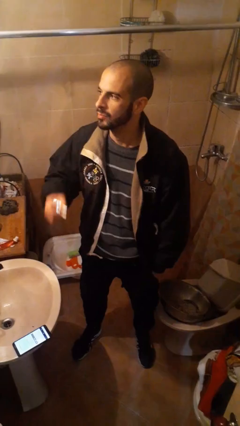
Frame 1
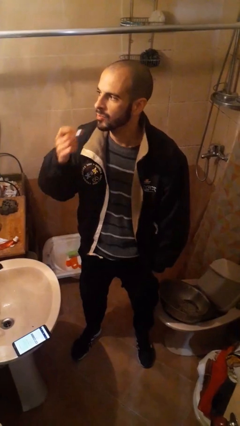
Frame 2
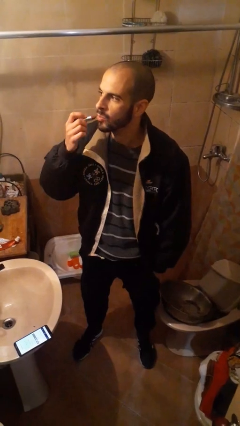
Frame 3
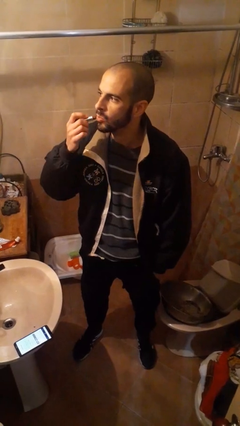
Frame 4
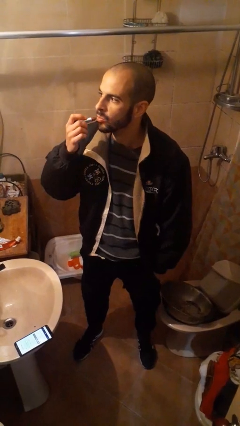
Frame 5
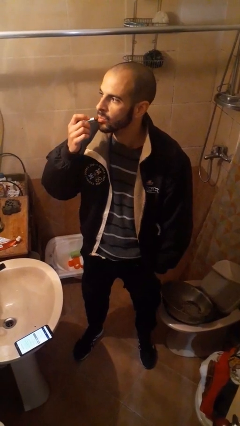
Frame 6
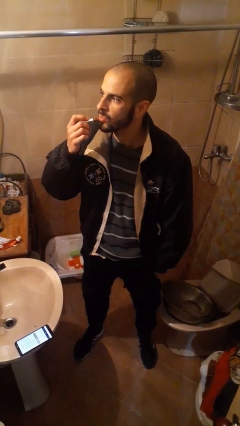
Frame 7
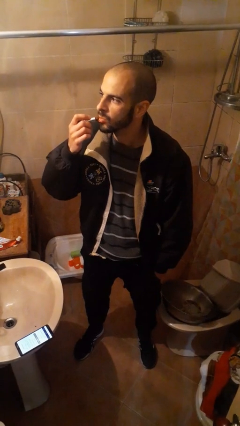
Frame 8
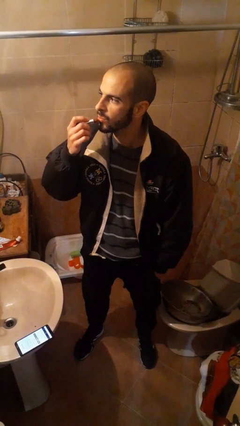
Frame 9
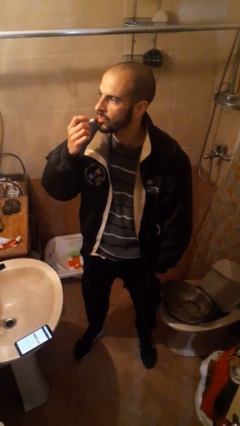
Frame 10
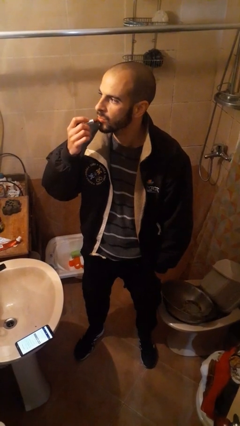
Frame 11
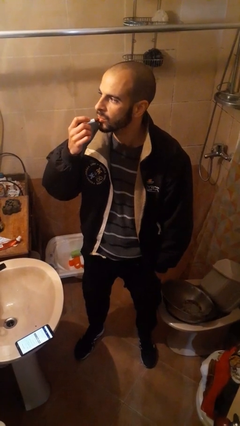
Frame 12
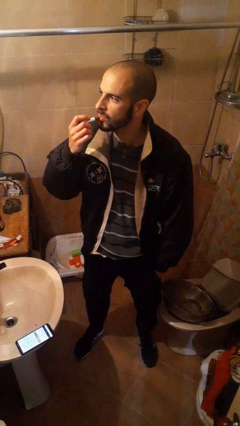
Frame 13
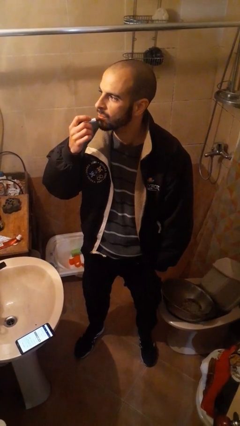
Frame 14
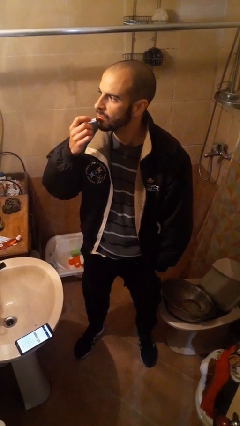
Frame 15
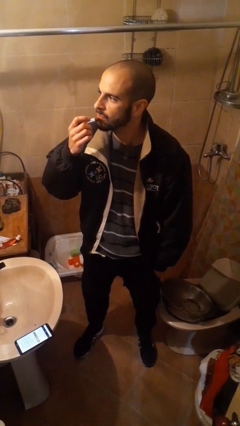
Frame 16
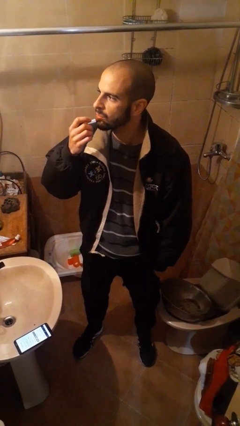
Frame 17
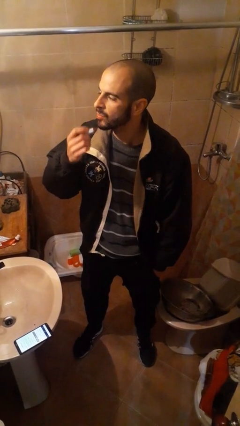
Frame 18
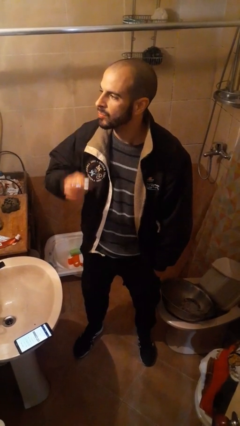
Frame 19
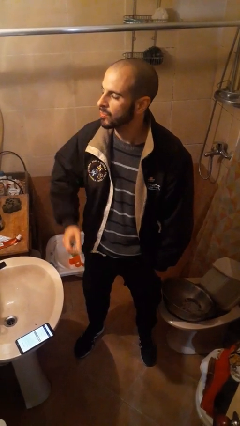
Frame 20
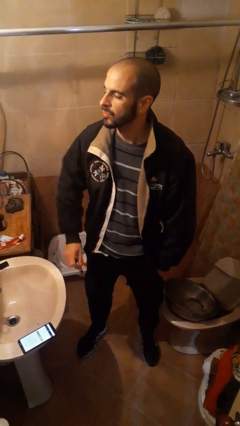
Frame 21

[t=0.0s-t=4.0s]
person applies lip makeup

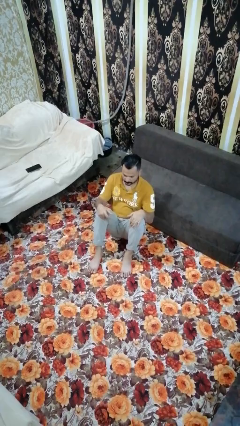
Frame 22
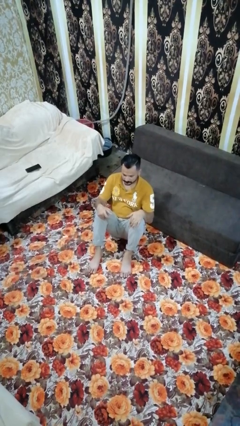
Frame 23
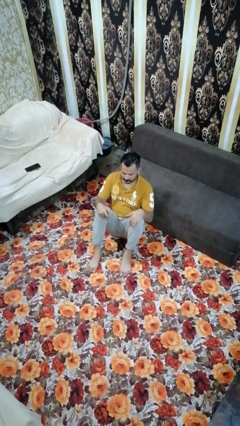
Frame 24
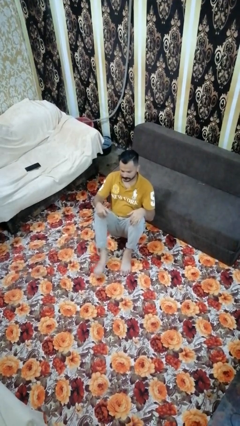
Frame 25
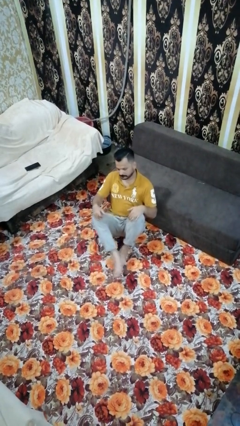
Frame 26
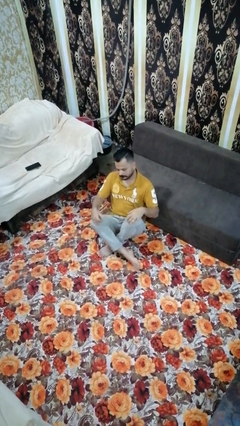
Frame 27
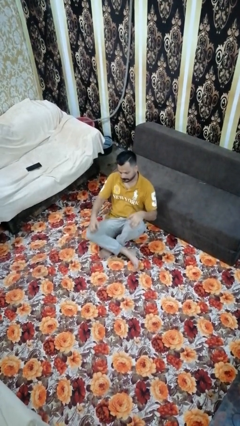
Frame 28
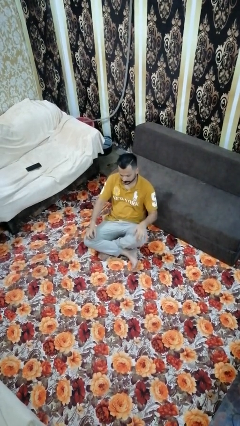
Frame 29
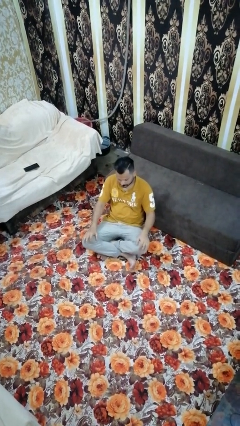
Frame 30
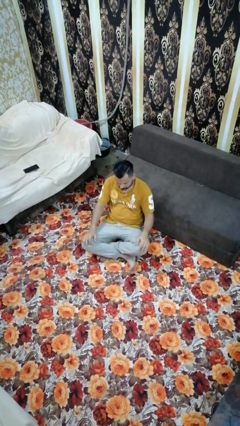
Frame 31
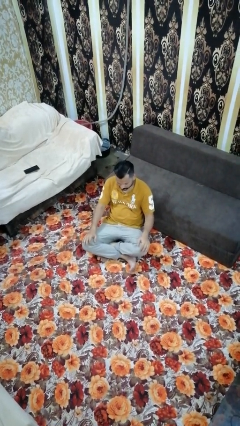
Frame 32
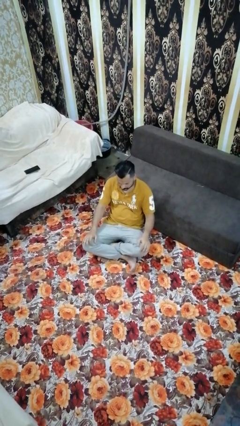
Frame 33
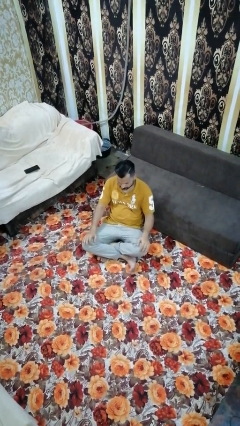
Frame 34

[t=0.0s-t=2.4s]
person crosses legs

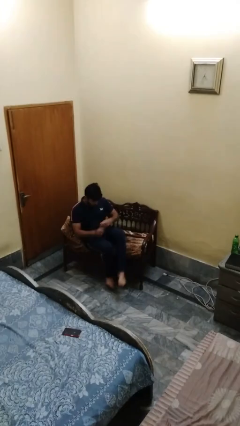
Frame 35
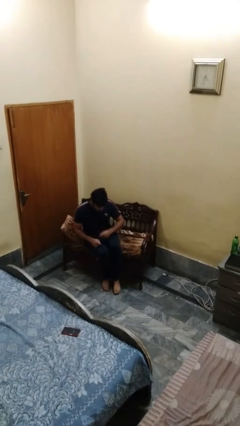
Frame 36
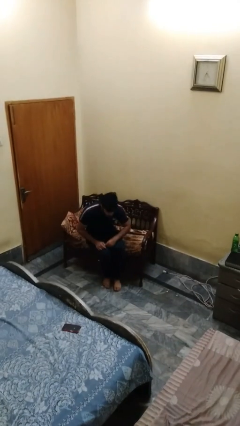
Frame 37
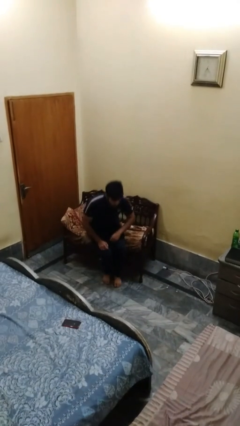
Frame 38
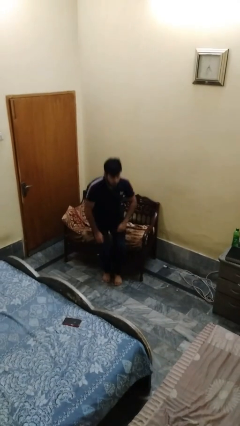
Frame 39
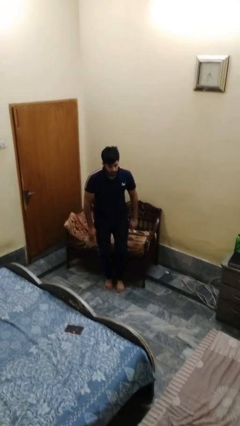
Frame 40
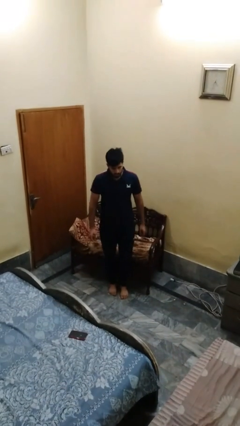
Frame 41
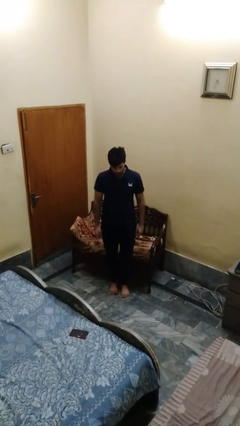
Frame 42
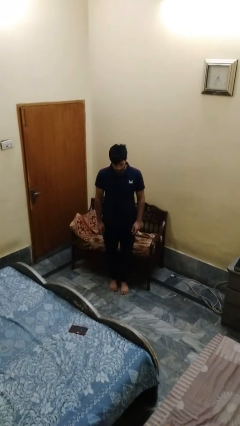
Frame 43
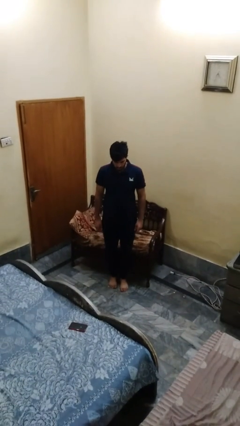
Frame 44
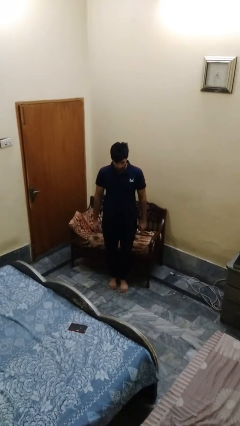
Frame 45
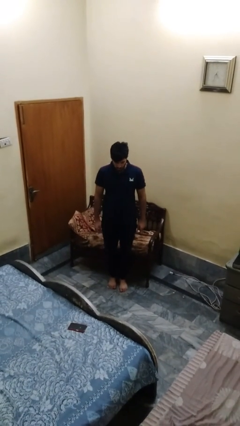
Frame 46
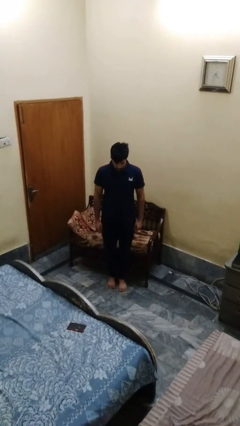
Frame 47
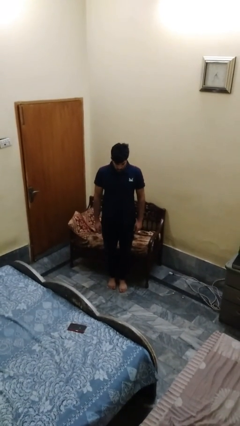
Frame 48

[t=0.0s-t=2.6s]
person stands up

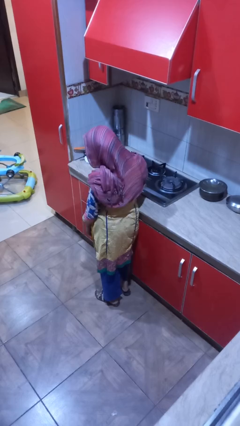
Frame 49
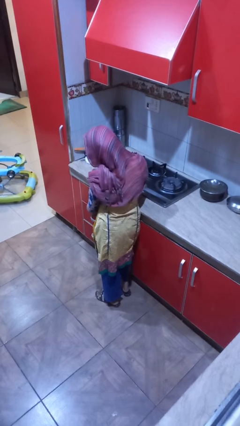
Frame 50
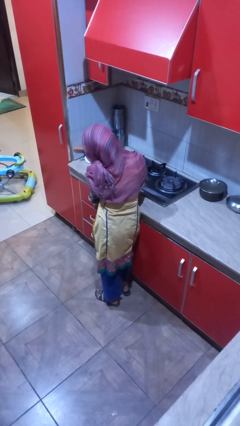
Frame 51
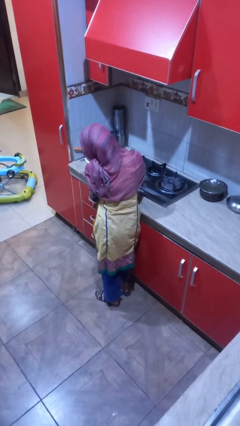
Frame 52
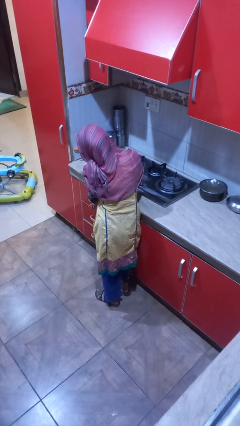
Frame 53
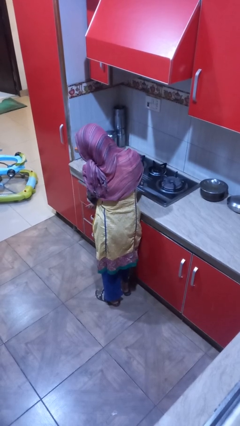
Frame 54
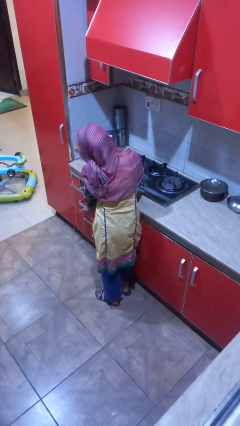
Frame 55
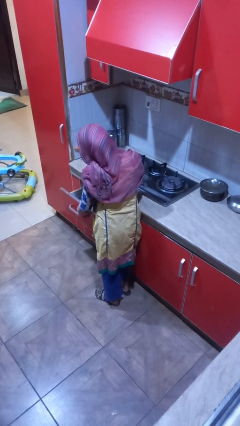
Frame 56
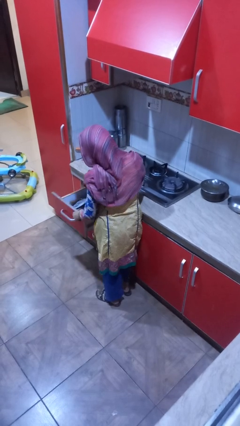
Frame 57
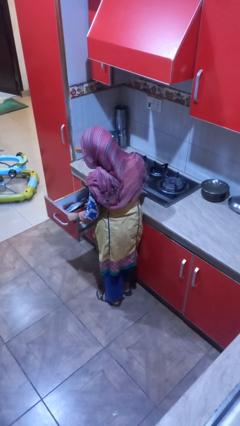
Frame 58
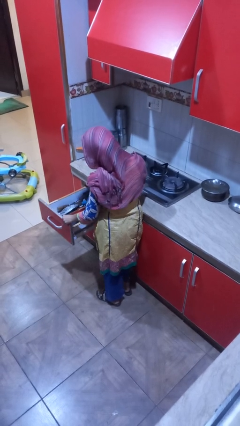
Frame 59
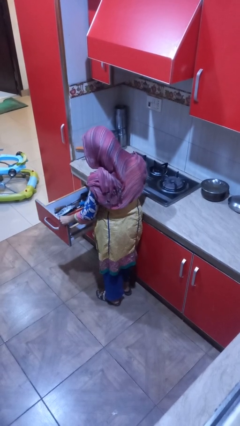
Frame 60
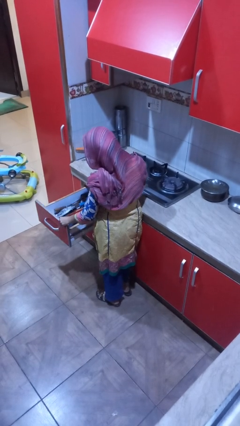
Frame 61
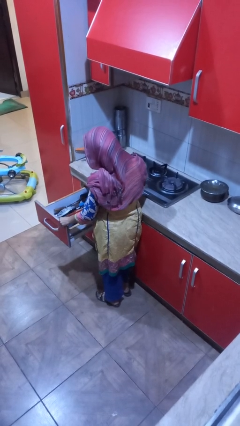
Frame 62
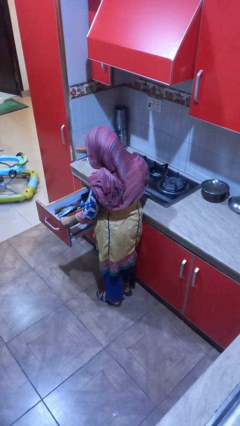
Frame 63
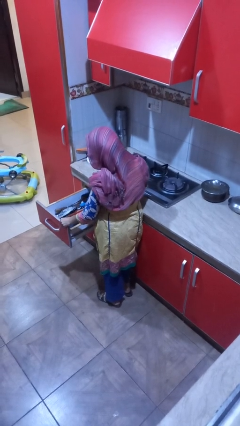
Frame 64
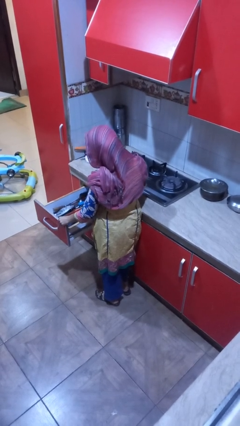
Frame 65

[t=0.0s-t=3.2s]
person opens kitchen drawer

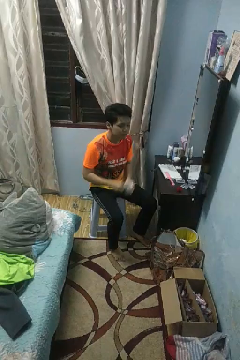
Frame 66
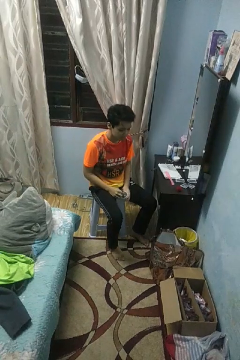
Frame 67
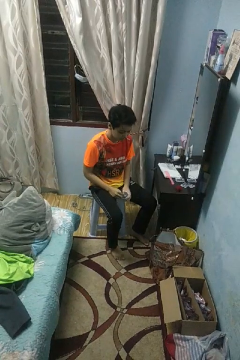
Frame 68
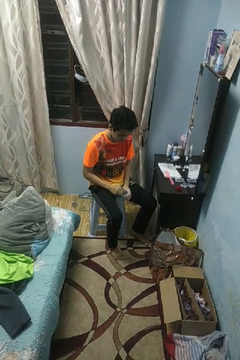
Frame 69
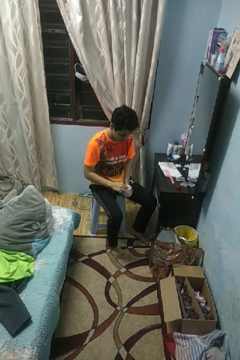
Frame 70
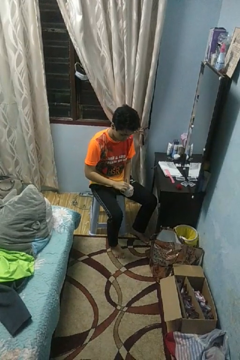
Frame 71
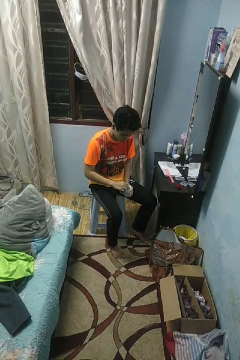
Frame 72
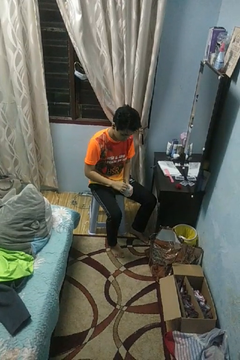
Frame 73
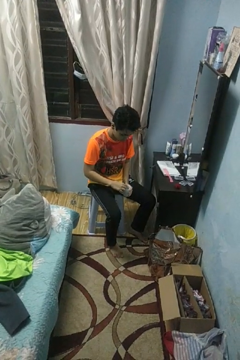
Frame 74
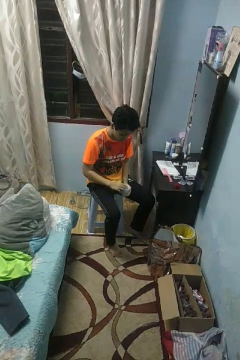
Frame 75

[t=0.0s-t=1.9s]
person stirs mug

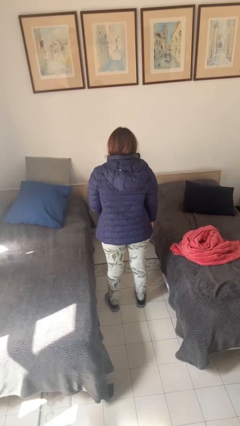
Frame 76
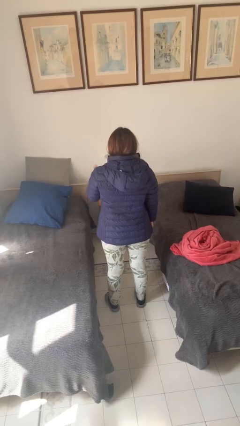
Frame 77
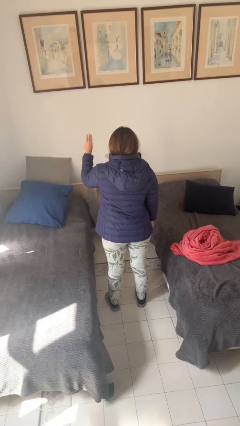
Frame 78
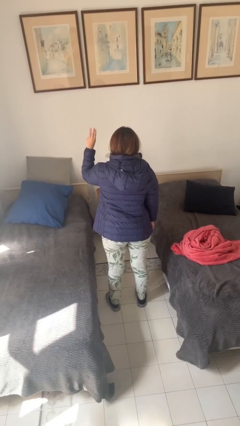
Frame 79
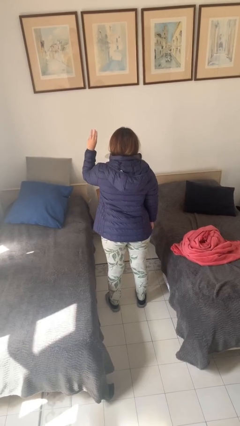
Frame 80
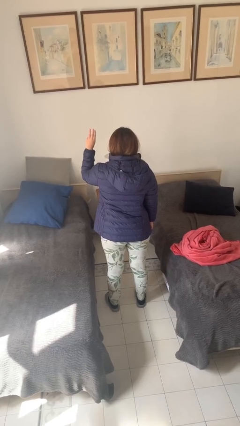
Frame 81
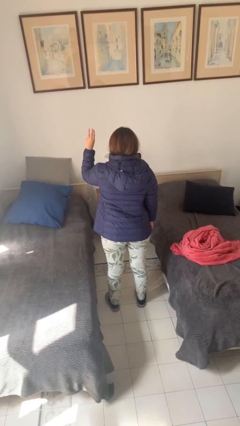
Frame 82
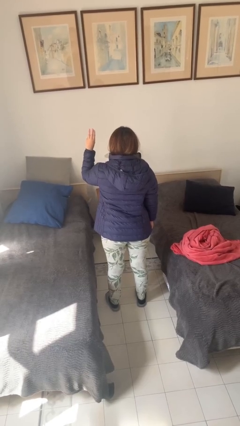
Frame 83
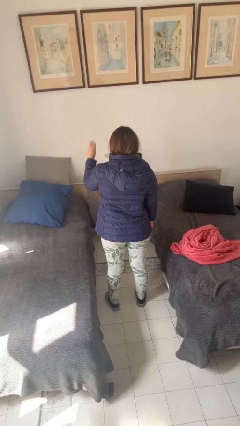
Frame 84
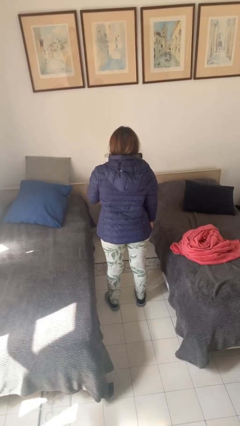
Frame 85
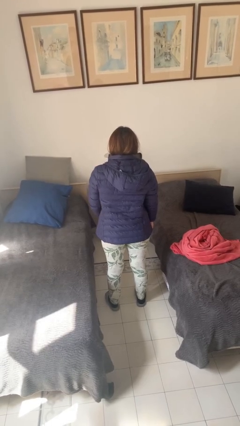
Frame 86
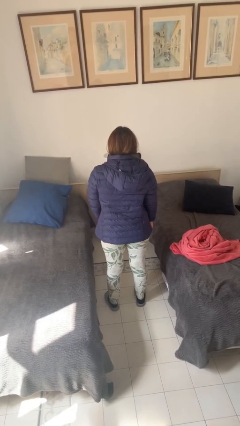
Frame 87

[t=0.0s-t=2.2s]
person gestures number three

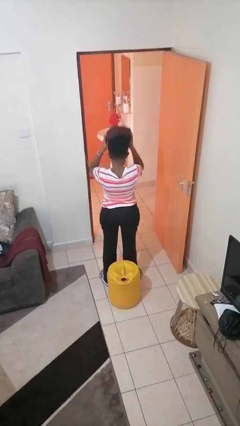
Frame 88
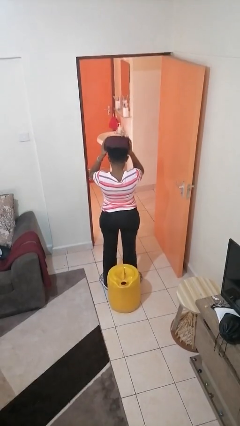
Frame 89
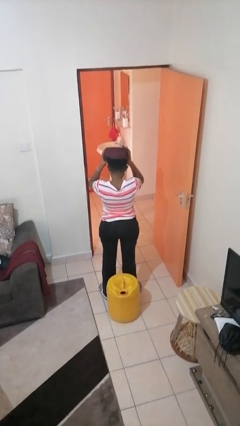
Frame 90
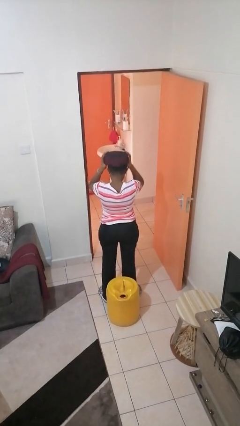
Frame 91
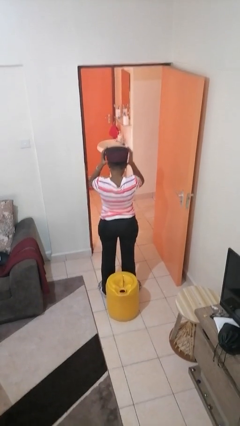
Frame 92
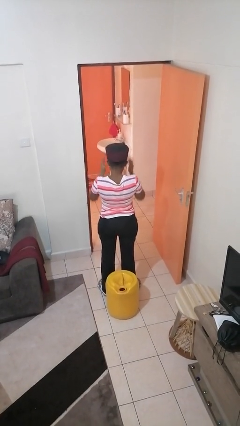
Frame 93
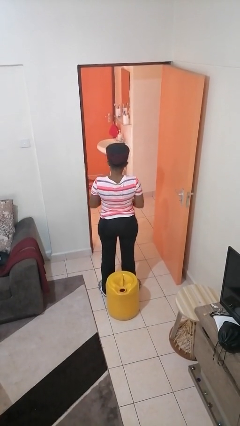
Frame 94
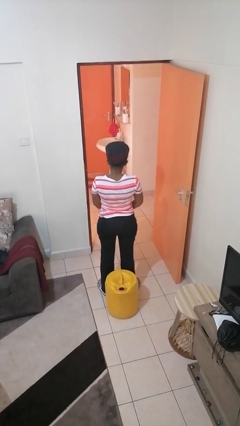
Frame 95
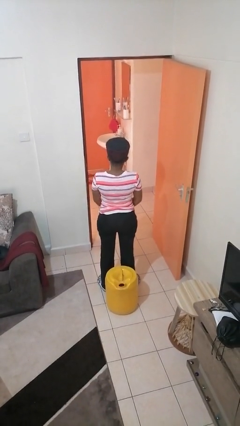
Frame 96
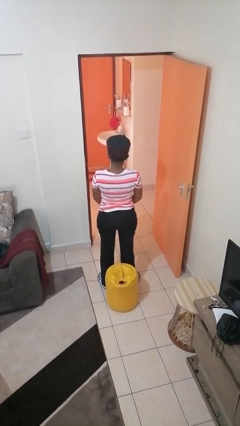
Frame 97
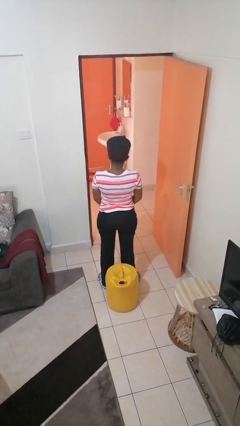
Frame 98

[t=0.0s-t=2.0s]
person puts on hat
